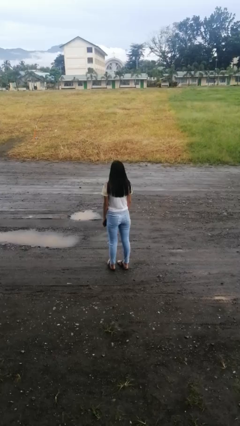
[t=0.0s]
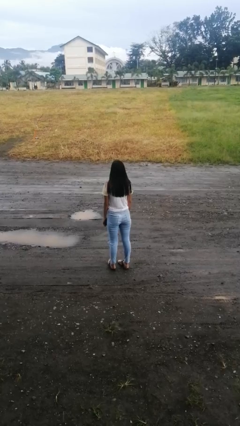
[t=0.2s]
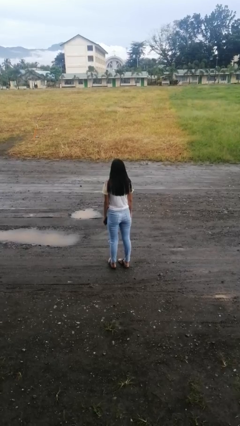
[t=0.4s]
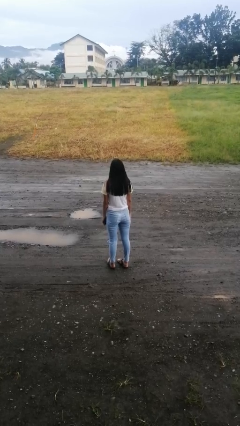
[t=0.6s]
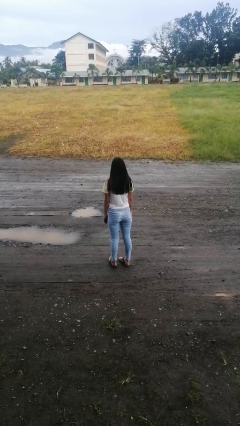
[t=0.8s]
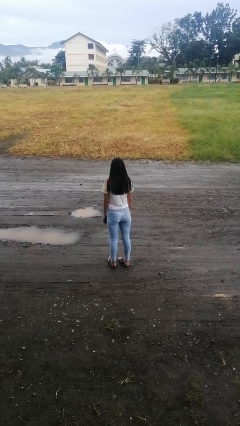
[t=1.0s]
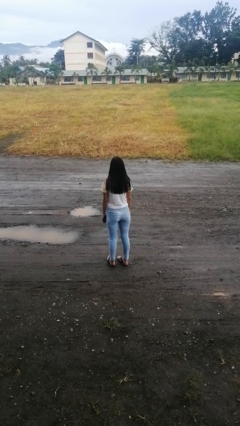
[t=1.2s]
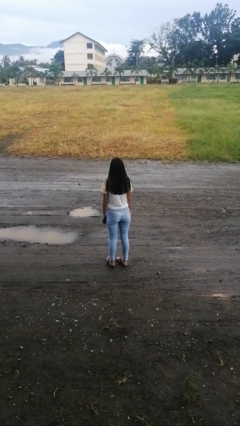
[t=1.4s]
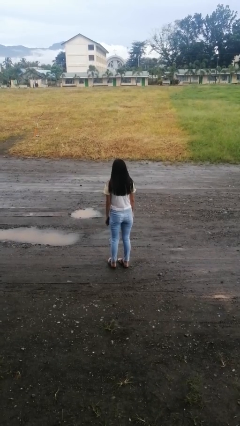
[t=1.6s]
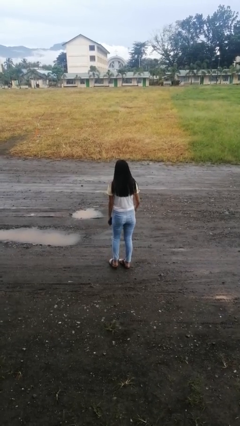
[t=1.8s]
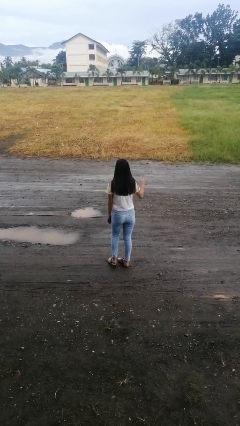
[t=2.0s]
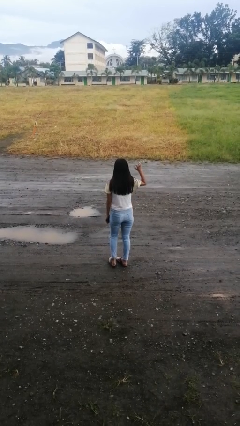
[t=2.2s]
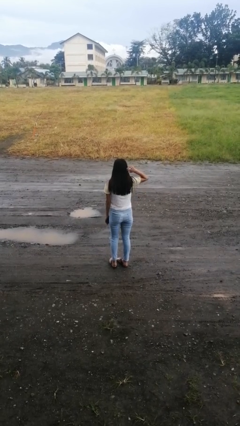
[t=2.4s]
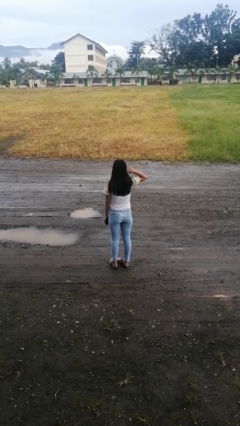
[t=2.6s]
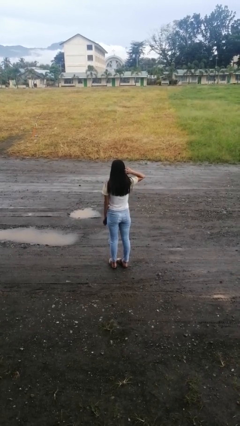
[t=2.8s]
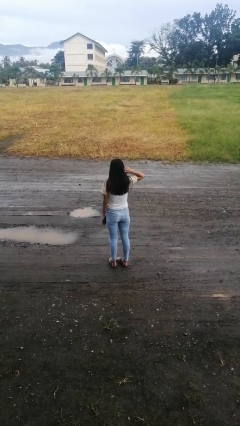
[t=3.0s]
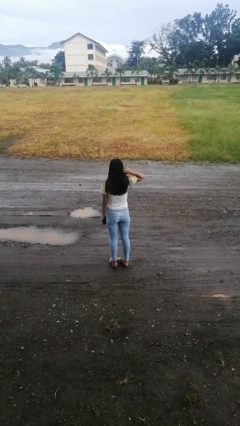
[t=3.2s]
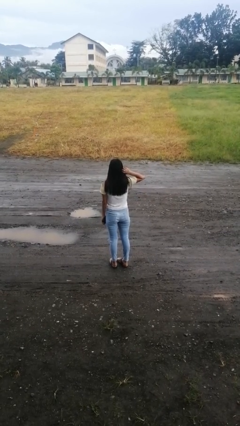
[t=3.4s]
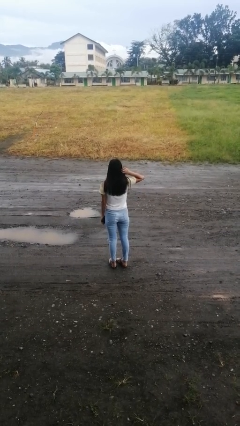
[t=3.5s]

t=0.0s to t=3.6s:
person scratches face

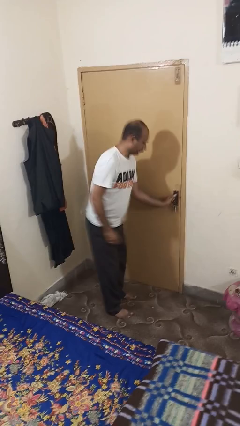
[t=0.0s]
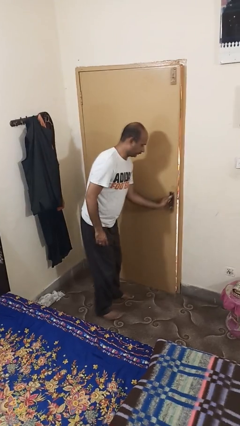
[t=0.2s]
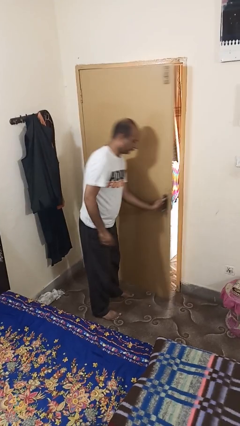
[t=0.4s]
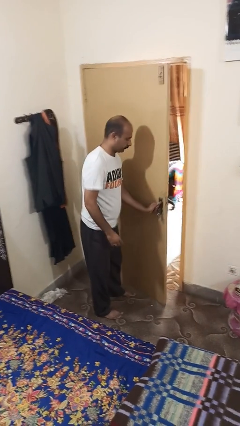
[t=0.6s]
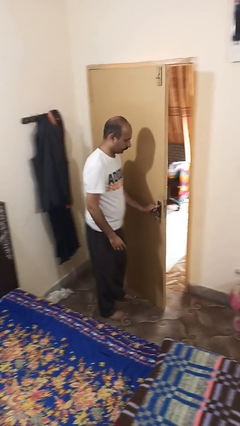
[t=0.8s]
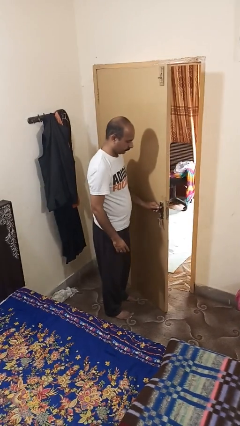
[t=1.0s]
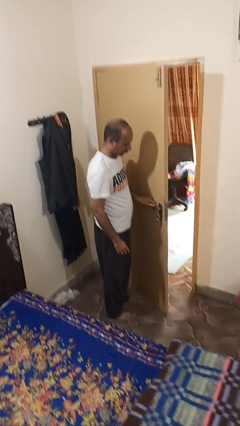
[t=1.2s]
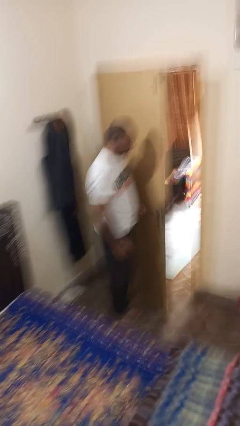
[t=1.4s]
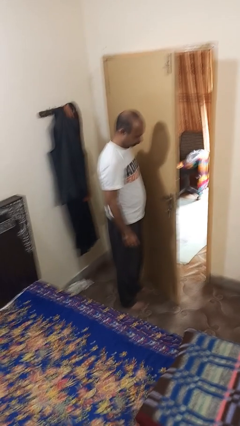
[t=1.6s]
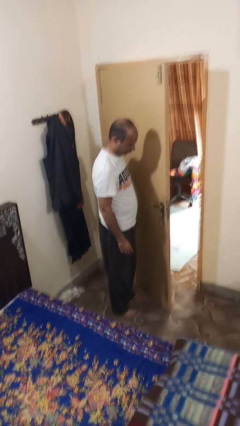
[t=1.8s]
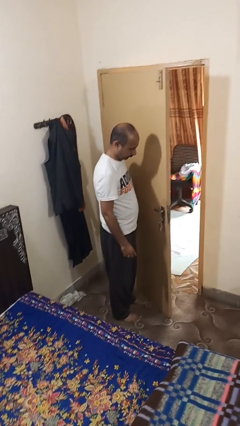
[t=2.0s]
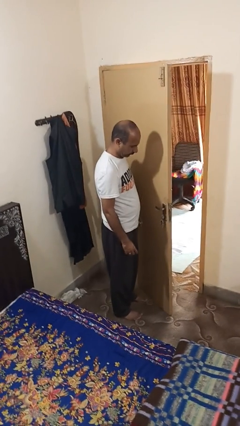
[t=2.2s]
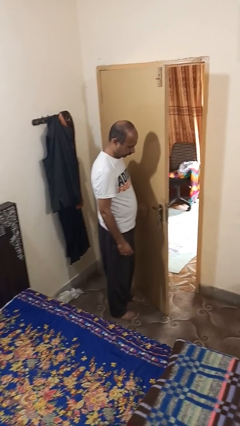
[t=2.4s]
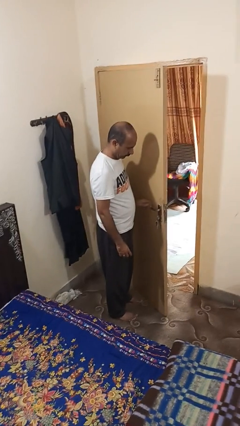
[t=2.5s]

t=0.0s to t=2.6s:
person opens facility door

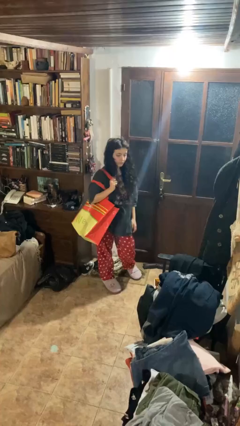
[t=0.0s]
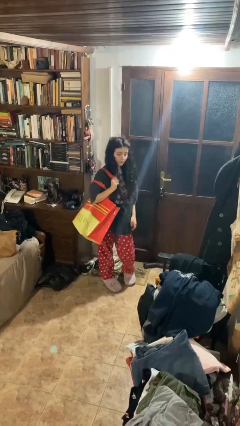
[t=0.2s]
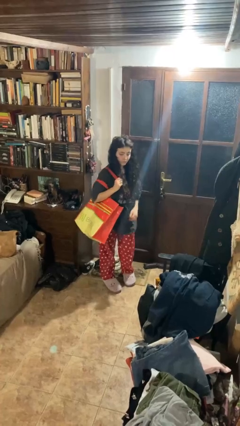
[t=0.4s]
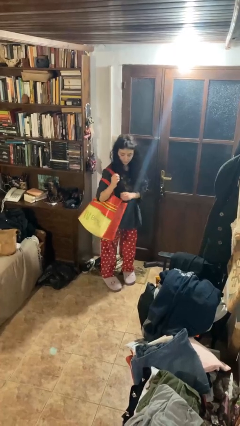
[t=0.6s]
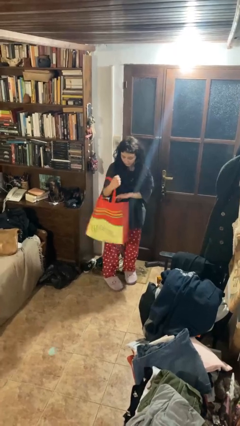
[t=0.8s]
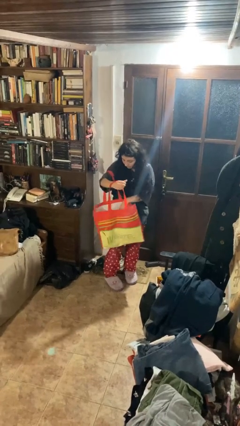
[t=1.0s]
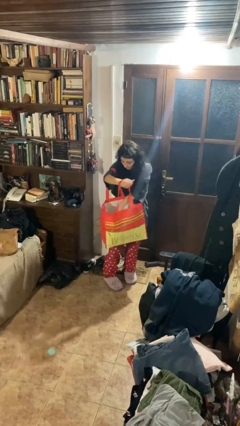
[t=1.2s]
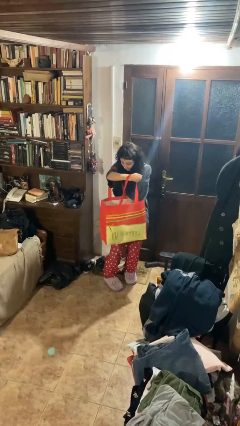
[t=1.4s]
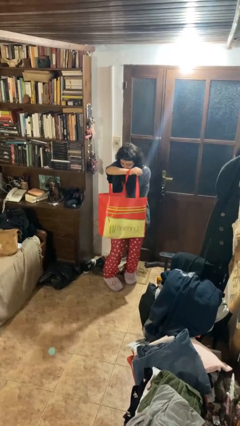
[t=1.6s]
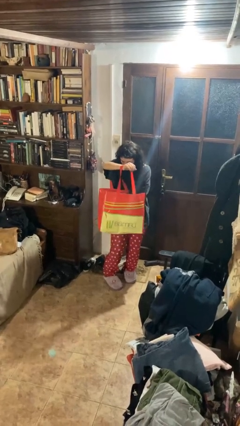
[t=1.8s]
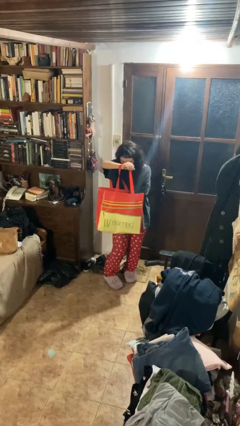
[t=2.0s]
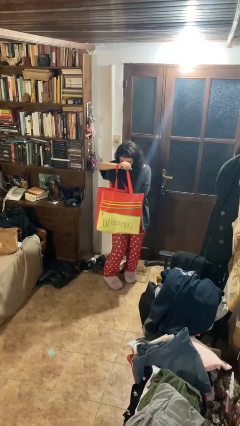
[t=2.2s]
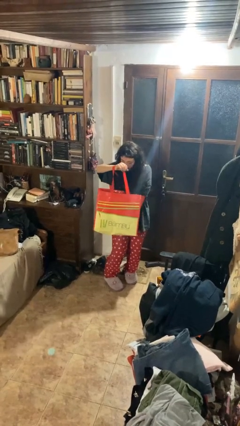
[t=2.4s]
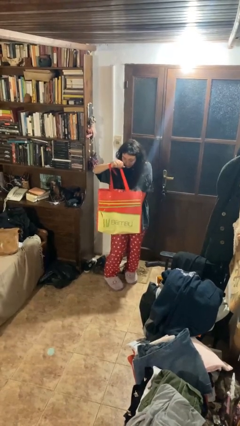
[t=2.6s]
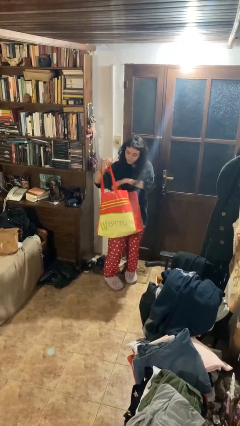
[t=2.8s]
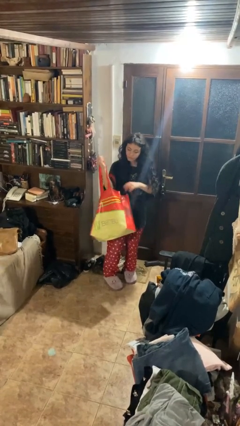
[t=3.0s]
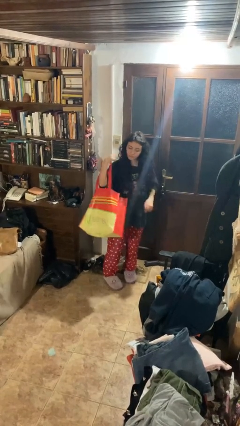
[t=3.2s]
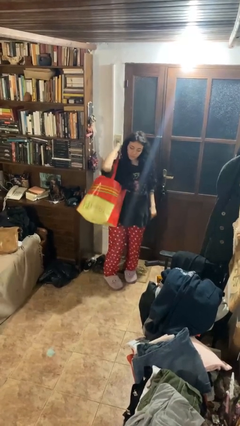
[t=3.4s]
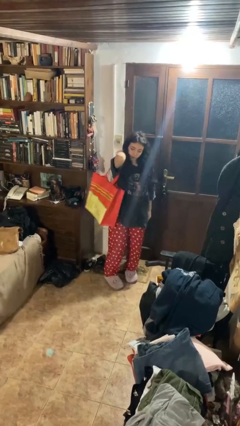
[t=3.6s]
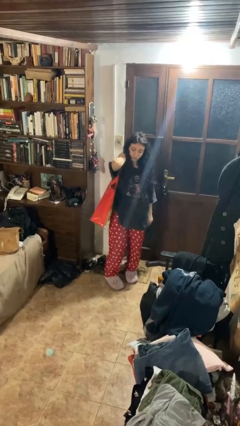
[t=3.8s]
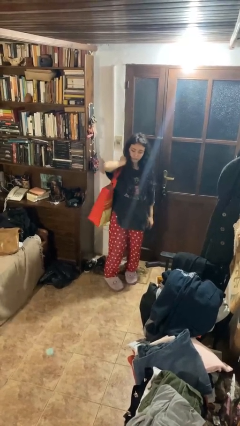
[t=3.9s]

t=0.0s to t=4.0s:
person searches in bag

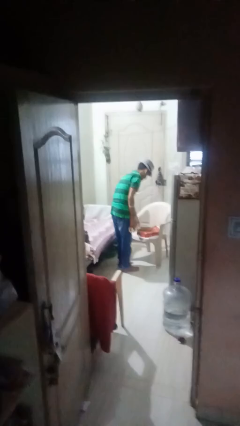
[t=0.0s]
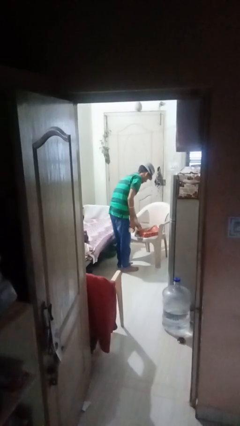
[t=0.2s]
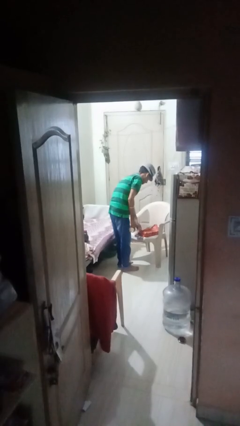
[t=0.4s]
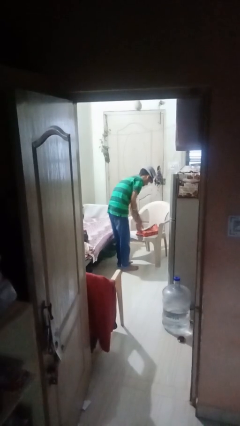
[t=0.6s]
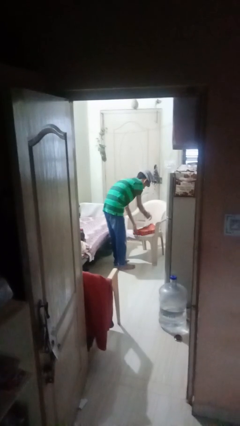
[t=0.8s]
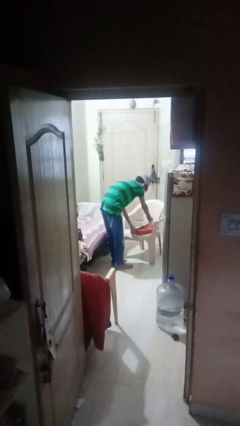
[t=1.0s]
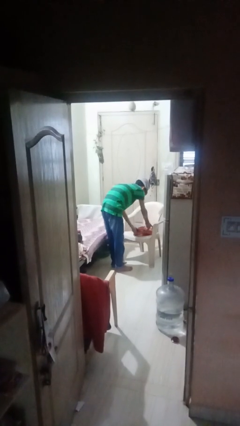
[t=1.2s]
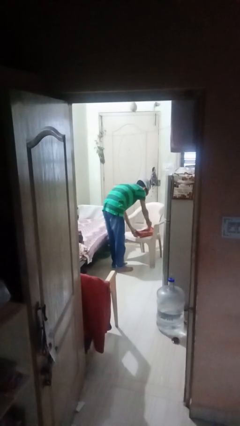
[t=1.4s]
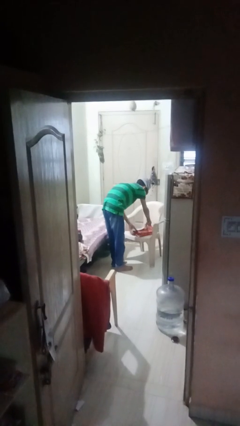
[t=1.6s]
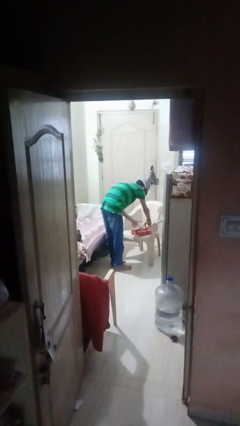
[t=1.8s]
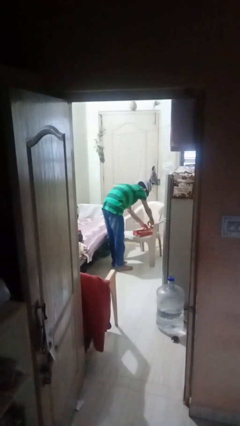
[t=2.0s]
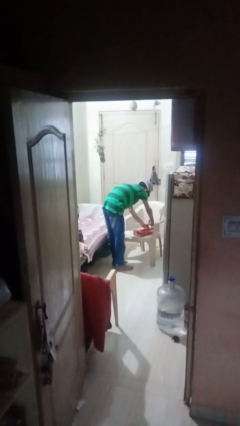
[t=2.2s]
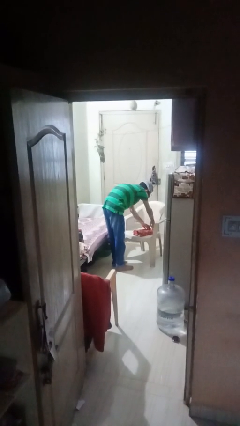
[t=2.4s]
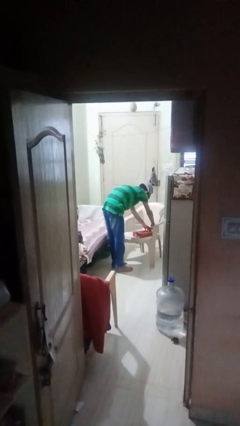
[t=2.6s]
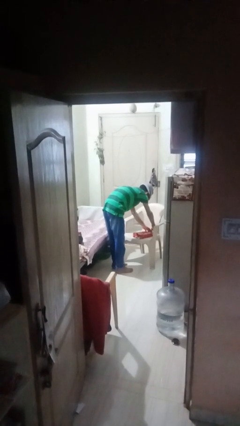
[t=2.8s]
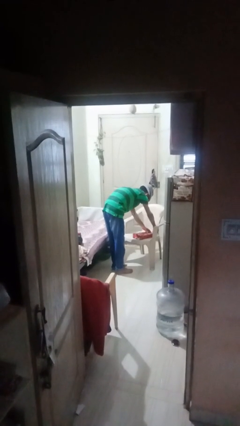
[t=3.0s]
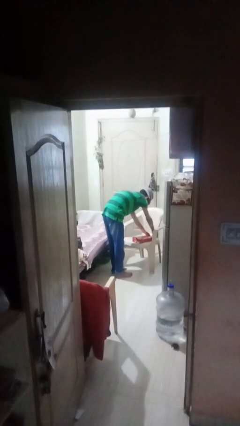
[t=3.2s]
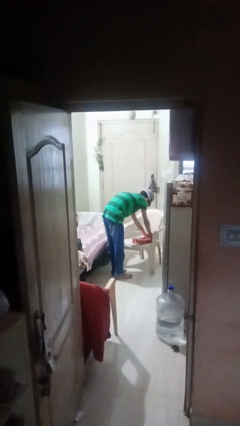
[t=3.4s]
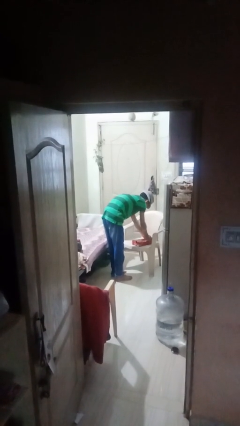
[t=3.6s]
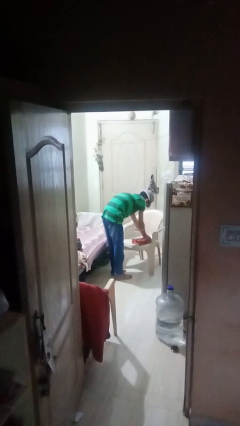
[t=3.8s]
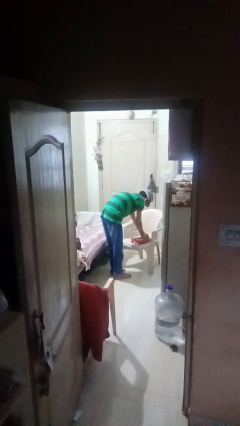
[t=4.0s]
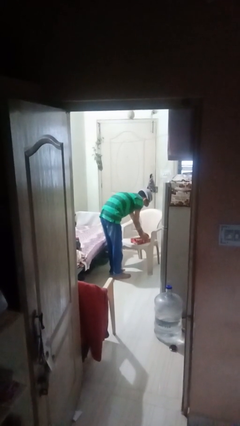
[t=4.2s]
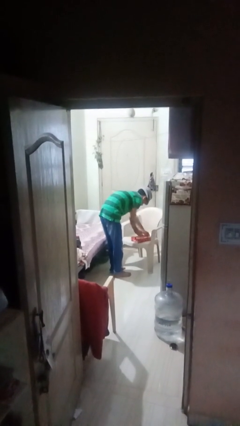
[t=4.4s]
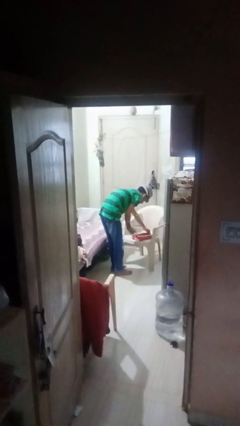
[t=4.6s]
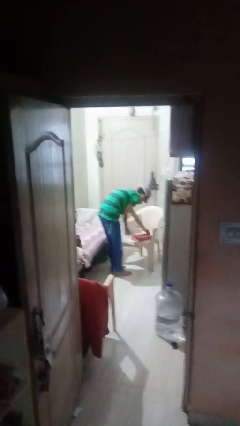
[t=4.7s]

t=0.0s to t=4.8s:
person wraps box

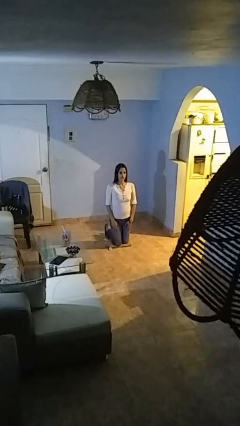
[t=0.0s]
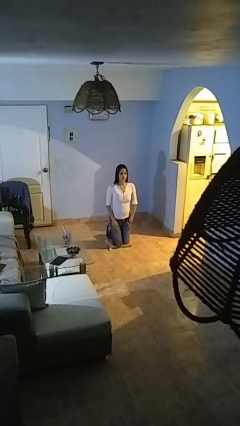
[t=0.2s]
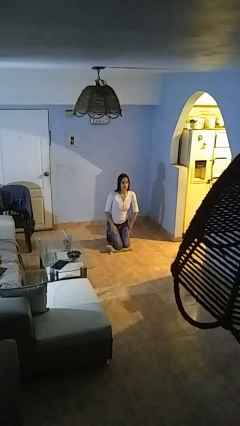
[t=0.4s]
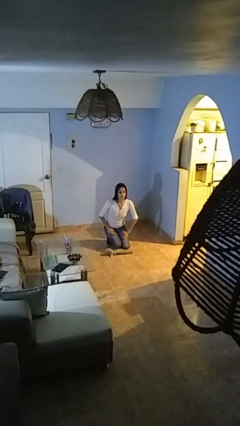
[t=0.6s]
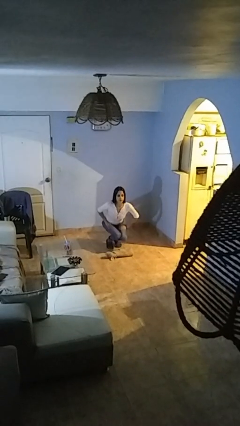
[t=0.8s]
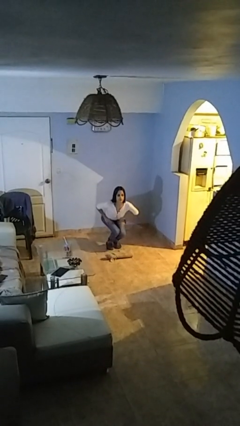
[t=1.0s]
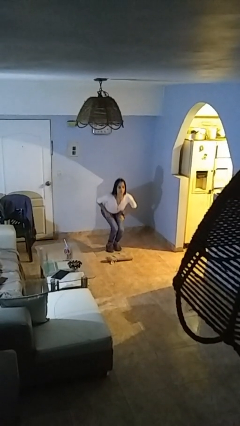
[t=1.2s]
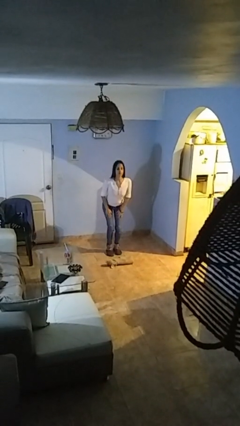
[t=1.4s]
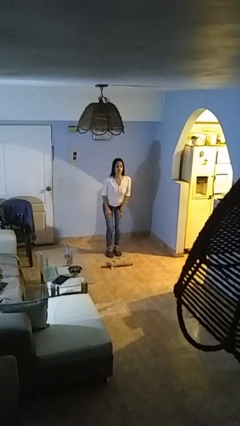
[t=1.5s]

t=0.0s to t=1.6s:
person stands up from floor

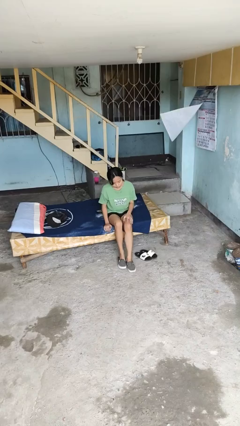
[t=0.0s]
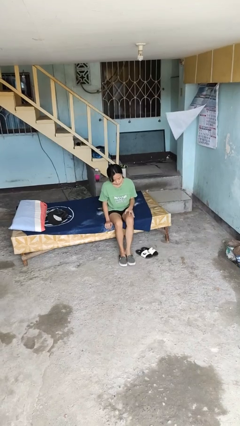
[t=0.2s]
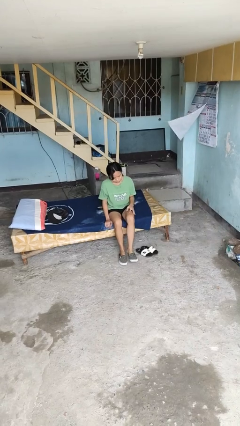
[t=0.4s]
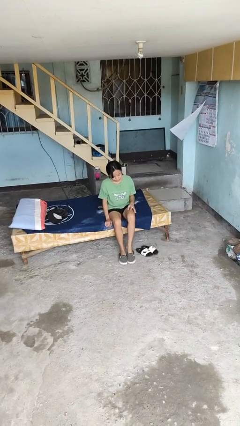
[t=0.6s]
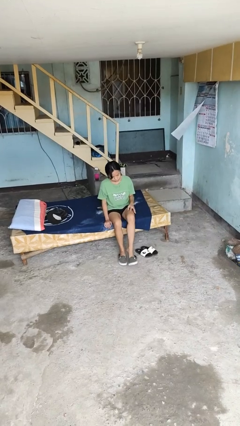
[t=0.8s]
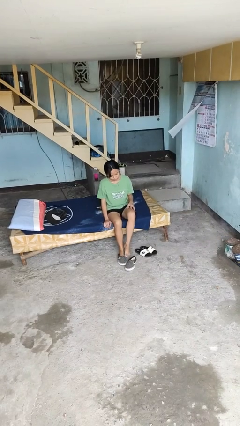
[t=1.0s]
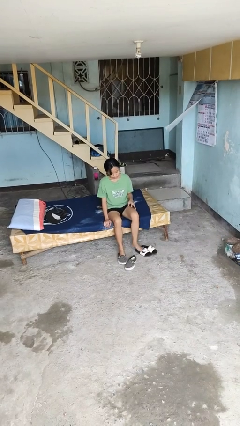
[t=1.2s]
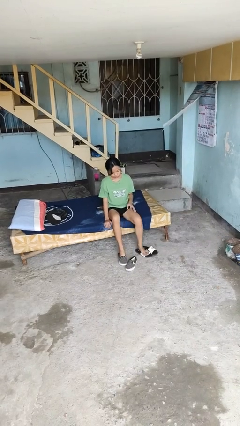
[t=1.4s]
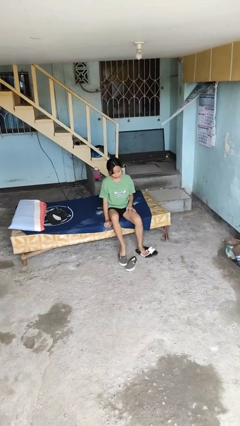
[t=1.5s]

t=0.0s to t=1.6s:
person takes off shoes
